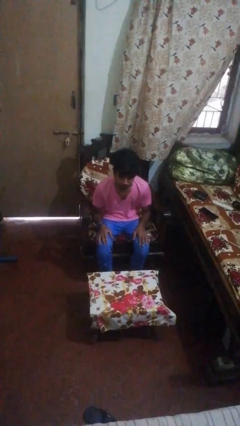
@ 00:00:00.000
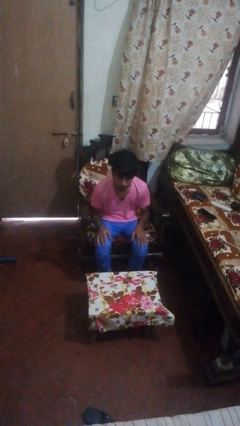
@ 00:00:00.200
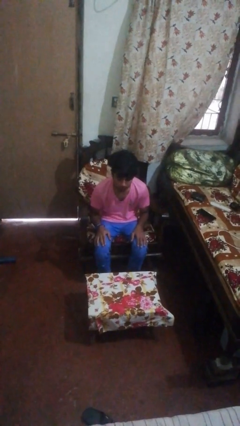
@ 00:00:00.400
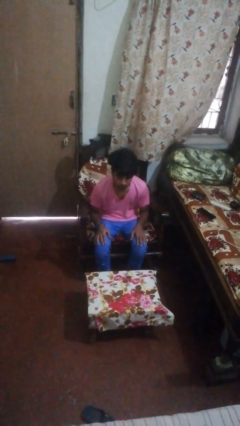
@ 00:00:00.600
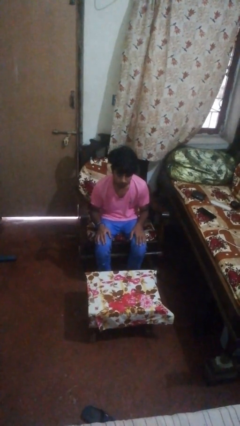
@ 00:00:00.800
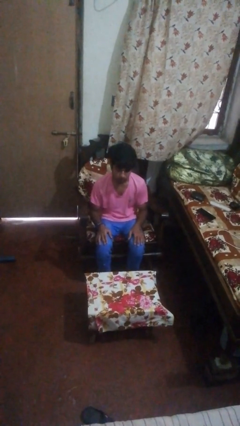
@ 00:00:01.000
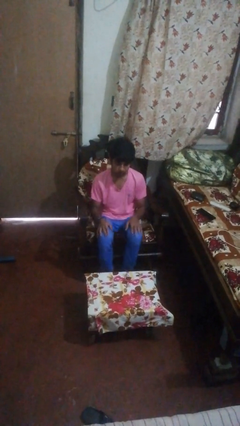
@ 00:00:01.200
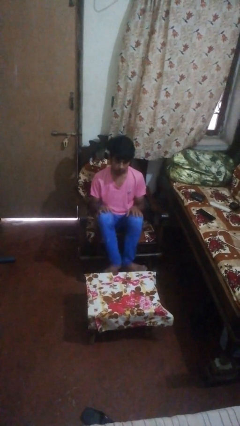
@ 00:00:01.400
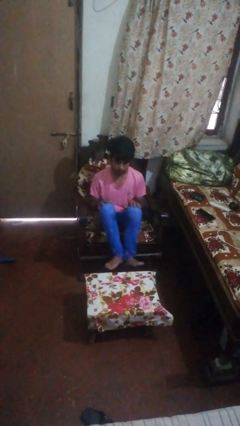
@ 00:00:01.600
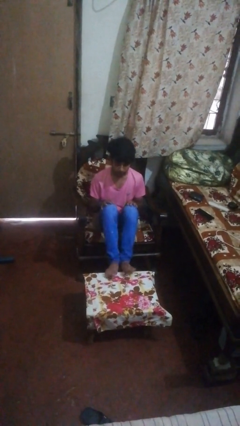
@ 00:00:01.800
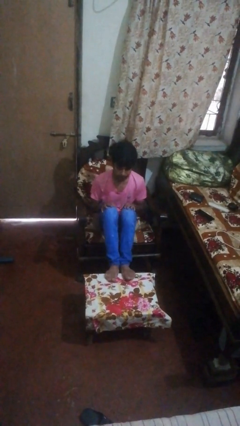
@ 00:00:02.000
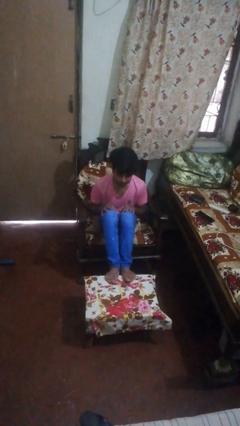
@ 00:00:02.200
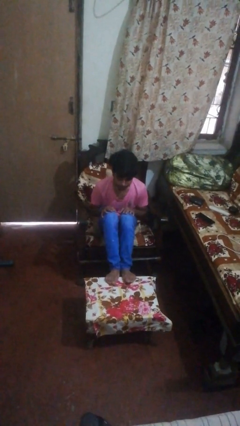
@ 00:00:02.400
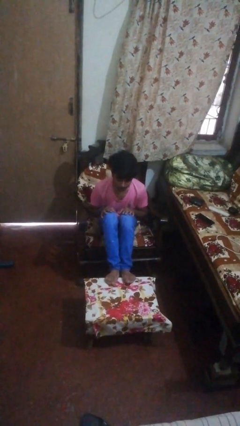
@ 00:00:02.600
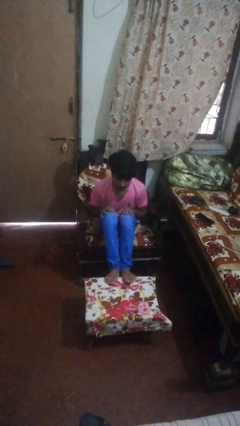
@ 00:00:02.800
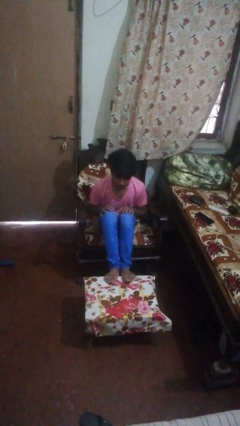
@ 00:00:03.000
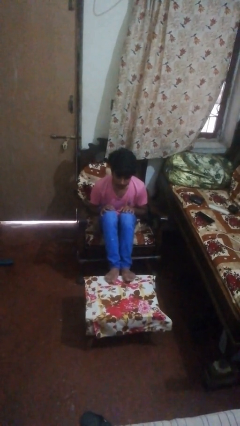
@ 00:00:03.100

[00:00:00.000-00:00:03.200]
person puts feet up

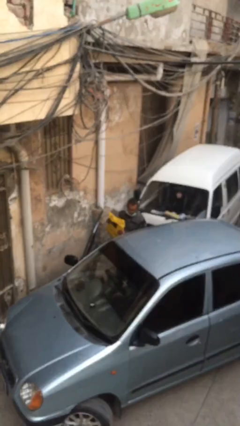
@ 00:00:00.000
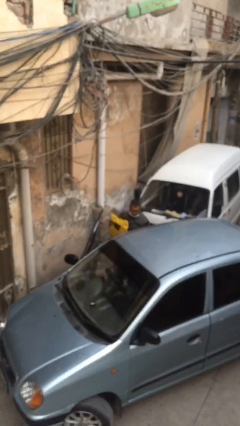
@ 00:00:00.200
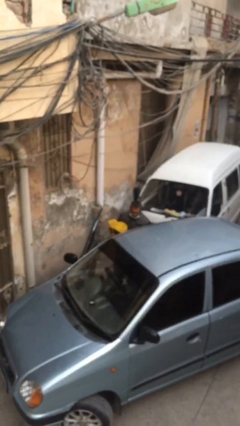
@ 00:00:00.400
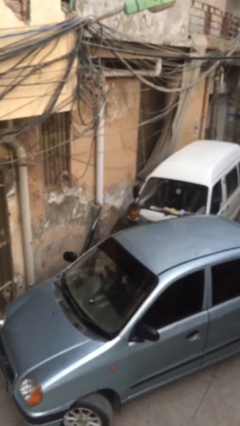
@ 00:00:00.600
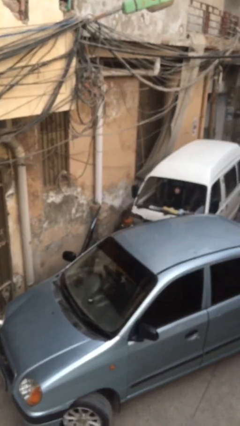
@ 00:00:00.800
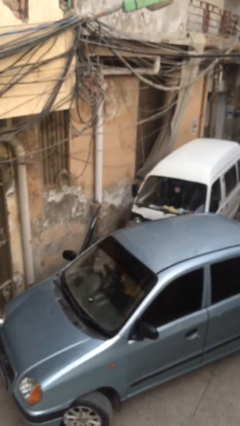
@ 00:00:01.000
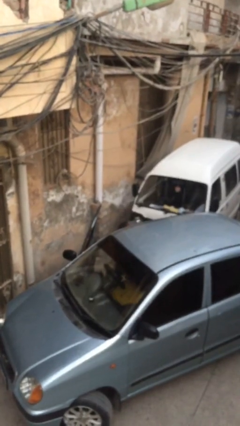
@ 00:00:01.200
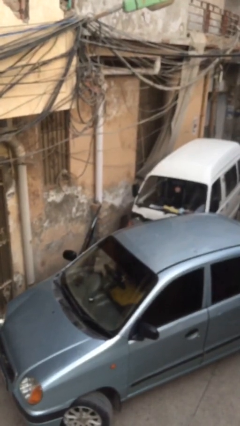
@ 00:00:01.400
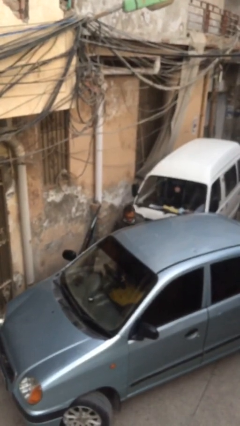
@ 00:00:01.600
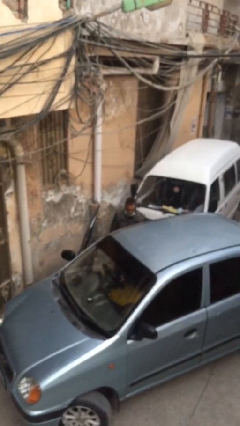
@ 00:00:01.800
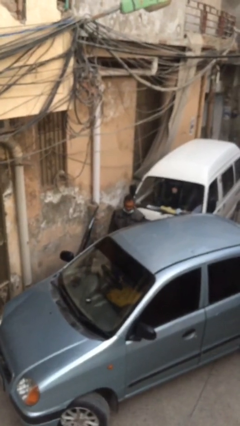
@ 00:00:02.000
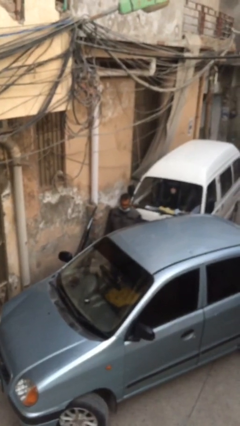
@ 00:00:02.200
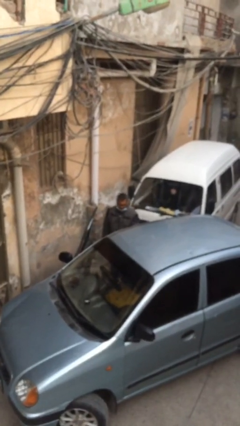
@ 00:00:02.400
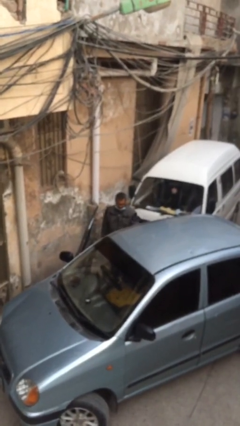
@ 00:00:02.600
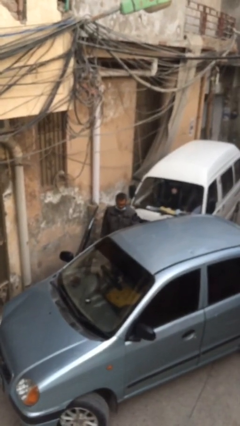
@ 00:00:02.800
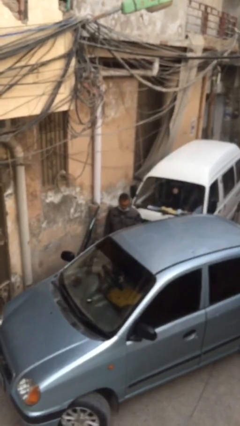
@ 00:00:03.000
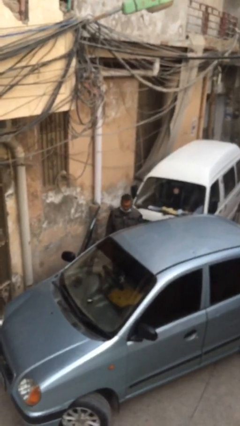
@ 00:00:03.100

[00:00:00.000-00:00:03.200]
person loads car

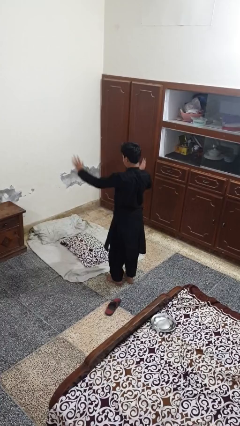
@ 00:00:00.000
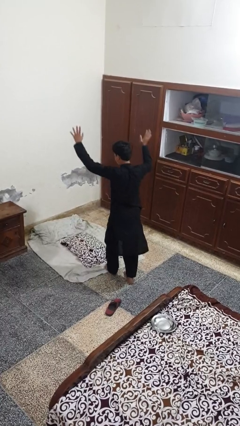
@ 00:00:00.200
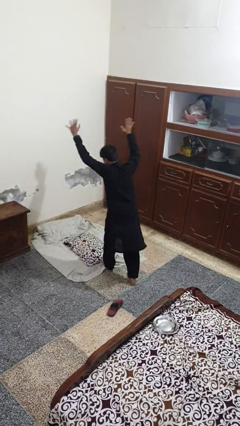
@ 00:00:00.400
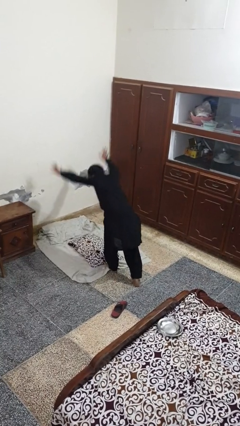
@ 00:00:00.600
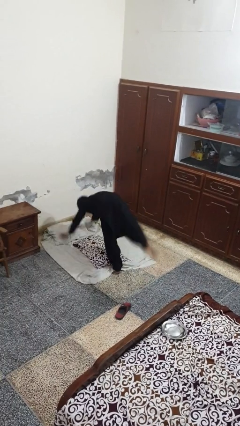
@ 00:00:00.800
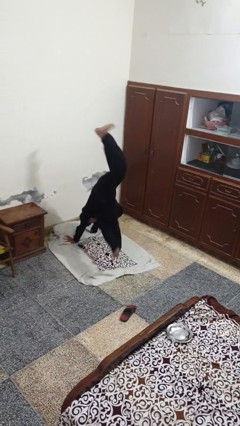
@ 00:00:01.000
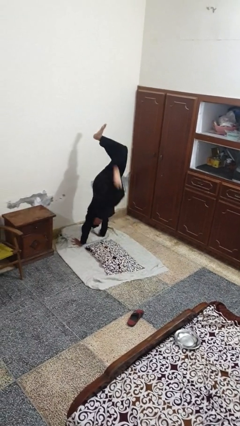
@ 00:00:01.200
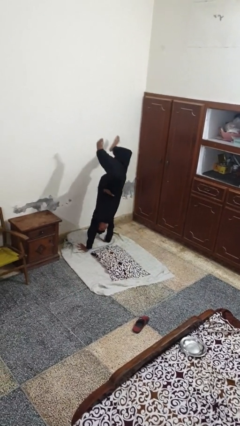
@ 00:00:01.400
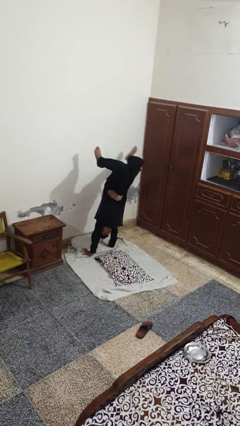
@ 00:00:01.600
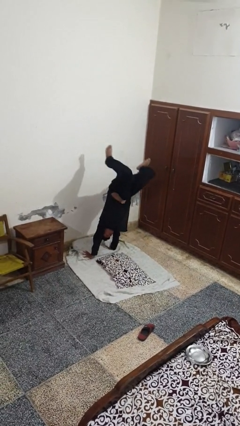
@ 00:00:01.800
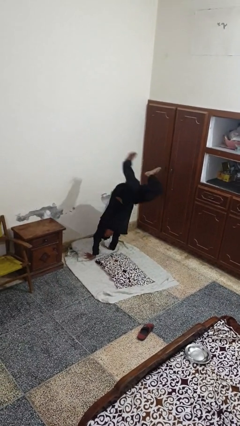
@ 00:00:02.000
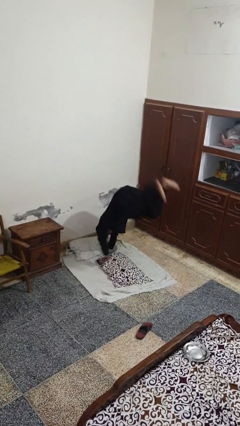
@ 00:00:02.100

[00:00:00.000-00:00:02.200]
person handstand

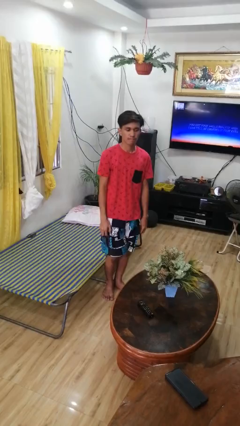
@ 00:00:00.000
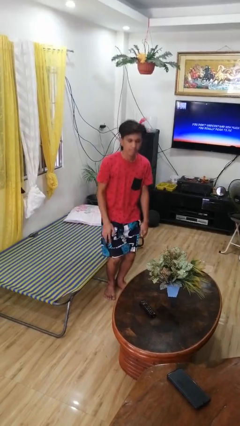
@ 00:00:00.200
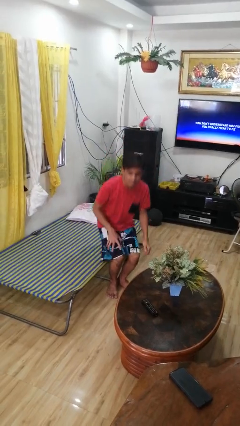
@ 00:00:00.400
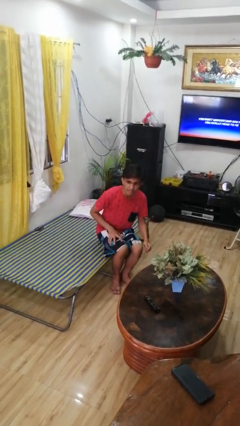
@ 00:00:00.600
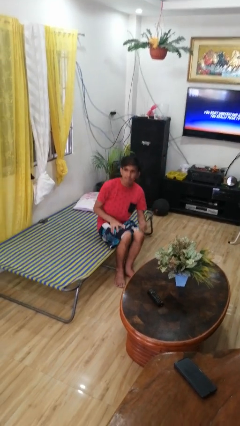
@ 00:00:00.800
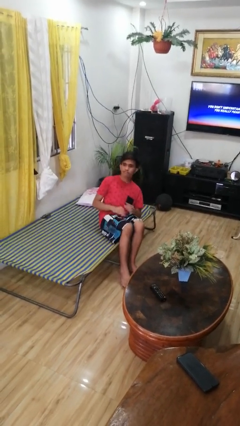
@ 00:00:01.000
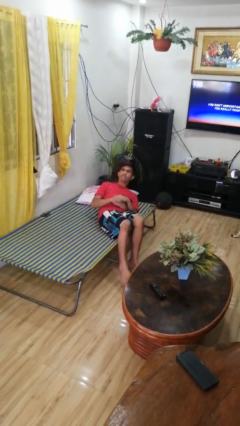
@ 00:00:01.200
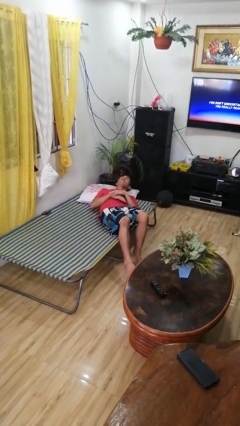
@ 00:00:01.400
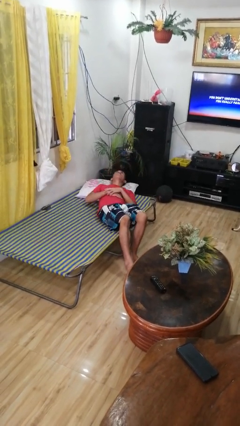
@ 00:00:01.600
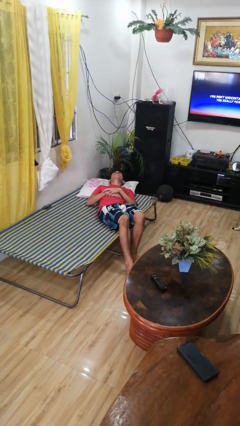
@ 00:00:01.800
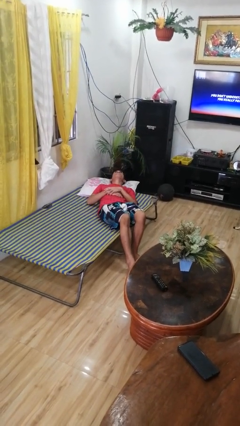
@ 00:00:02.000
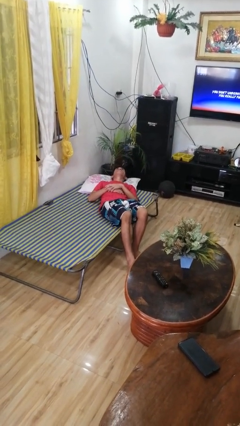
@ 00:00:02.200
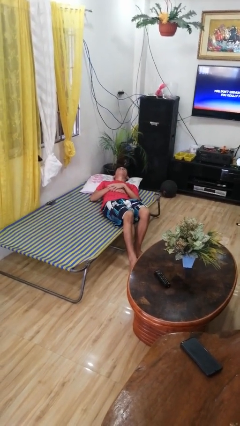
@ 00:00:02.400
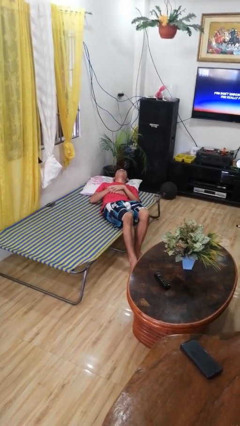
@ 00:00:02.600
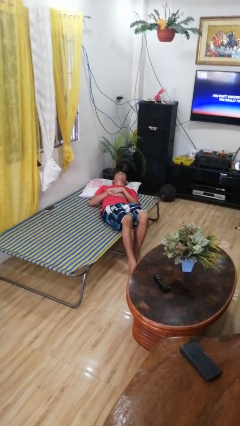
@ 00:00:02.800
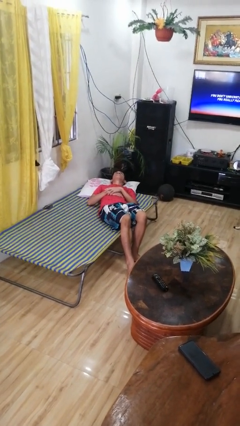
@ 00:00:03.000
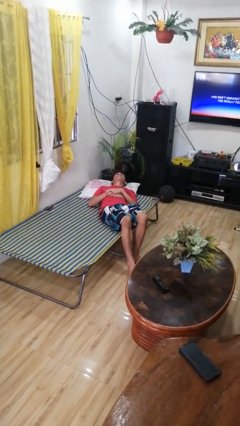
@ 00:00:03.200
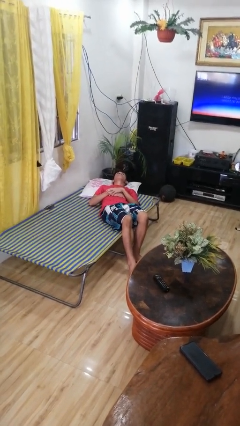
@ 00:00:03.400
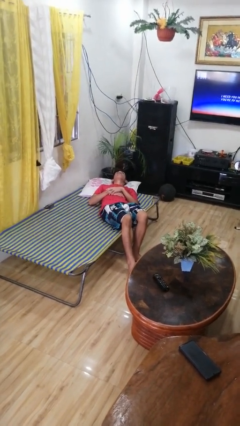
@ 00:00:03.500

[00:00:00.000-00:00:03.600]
person lies down on bed

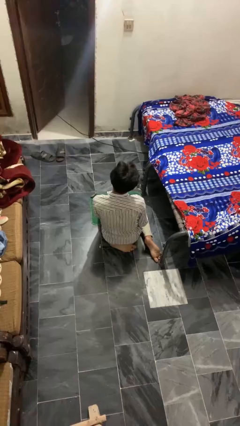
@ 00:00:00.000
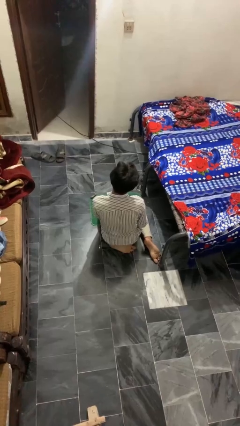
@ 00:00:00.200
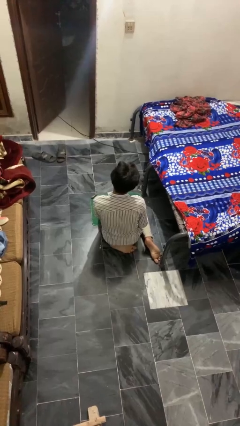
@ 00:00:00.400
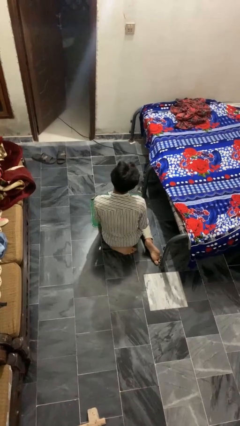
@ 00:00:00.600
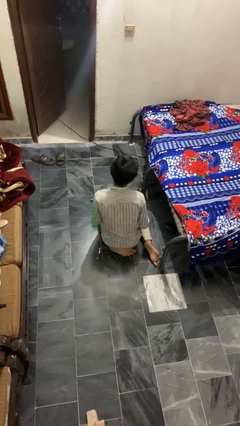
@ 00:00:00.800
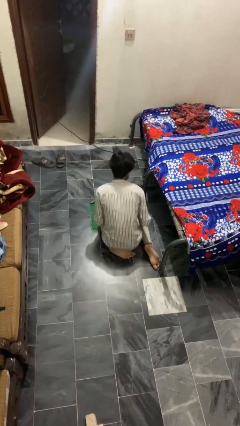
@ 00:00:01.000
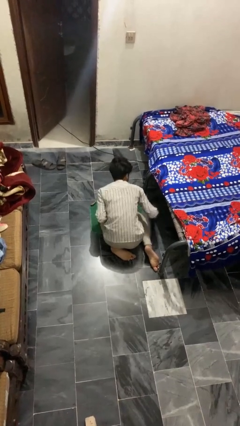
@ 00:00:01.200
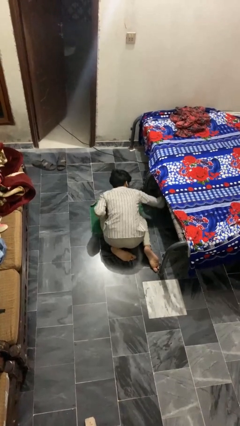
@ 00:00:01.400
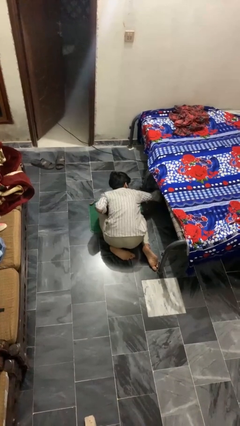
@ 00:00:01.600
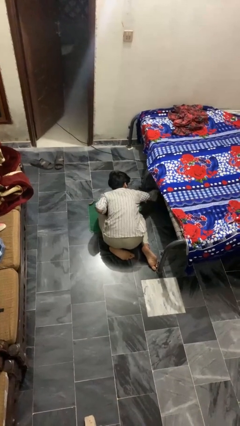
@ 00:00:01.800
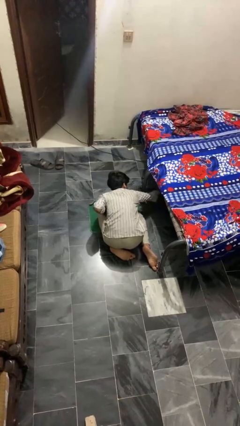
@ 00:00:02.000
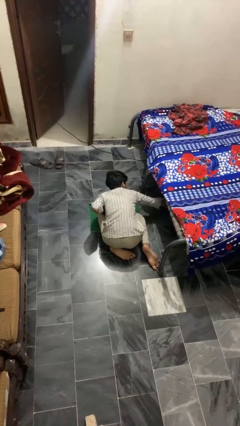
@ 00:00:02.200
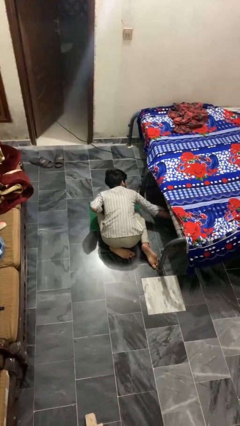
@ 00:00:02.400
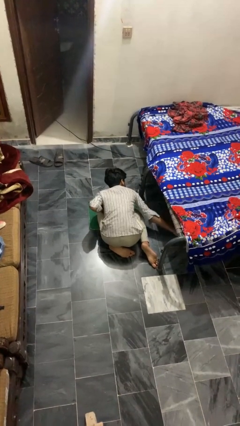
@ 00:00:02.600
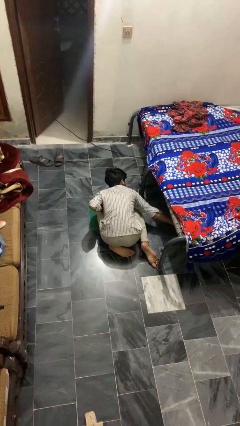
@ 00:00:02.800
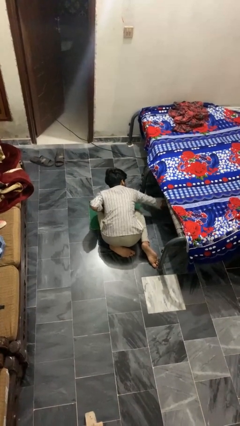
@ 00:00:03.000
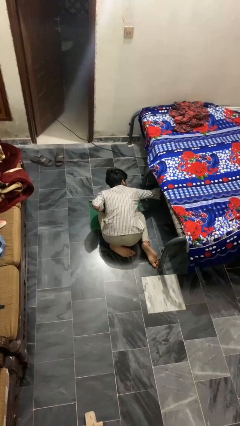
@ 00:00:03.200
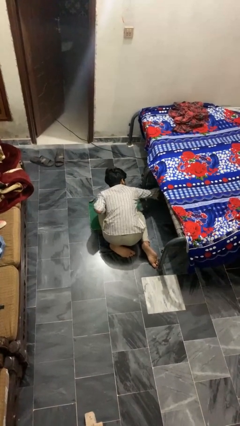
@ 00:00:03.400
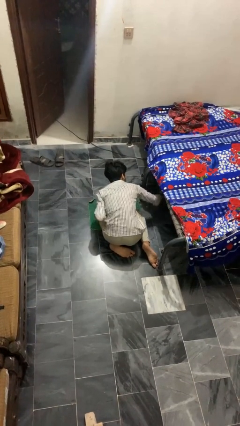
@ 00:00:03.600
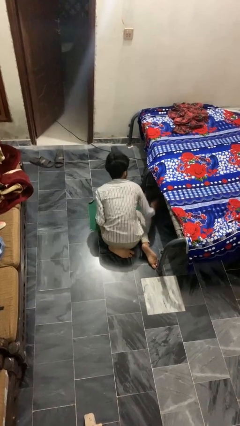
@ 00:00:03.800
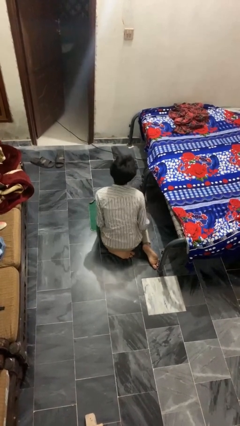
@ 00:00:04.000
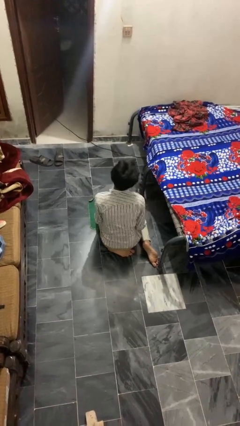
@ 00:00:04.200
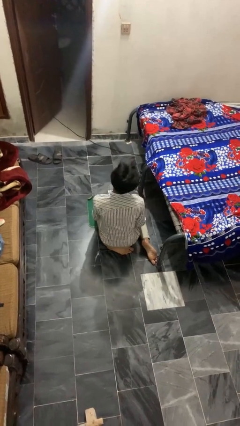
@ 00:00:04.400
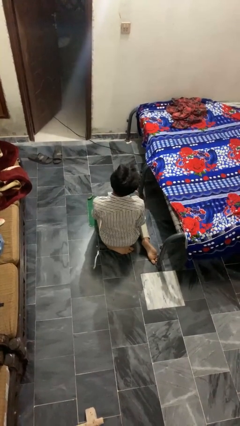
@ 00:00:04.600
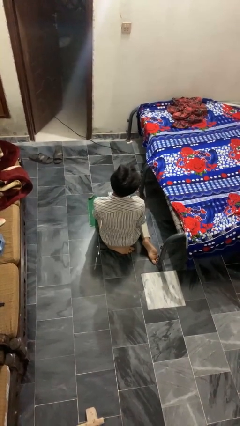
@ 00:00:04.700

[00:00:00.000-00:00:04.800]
person searches under bed

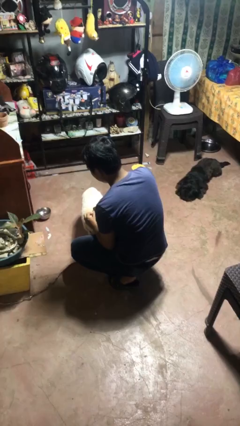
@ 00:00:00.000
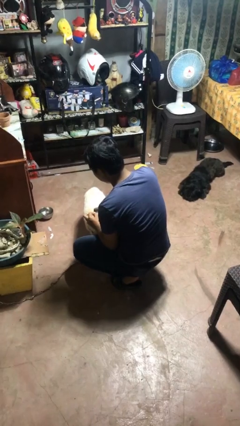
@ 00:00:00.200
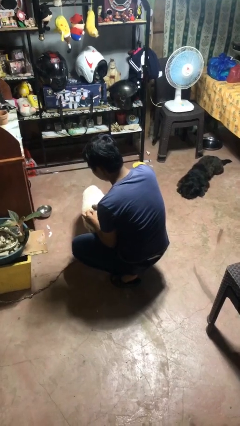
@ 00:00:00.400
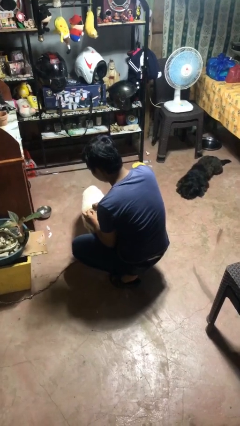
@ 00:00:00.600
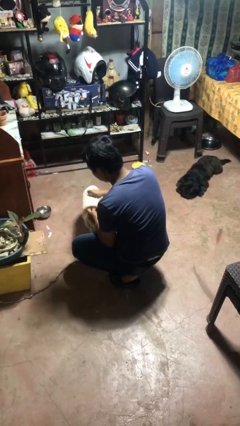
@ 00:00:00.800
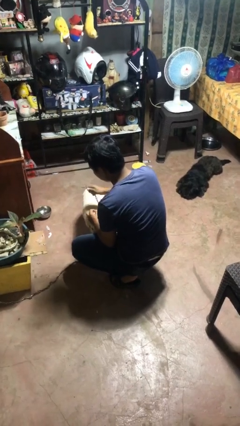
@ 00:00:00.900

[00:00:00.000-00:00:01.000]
person unattaches leash from dog
